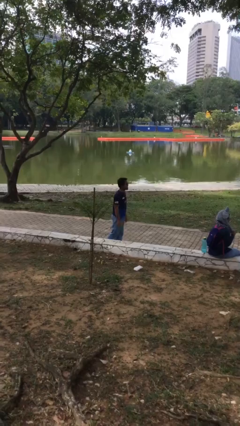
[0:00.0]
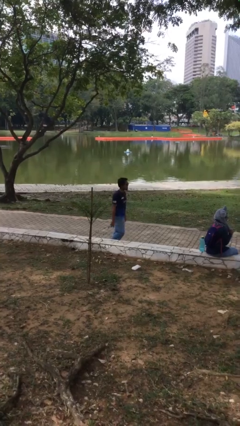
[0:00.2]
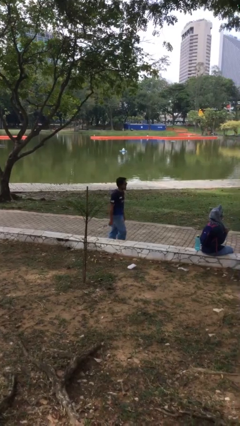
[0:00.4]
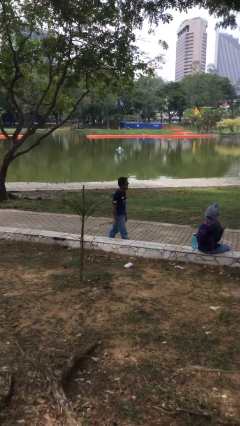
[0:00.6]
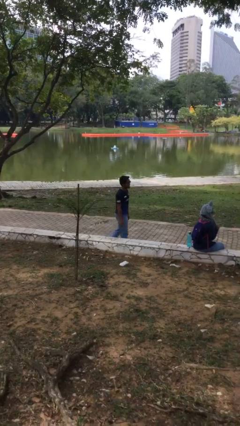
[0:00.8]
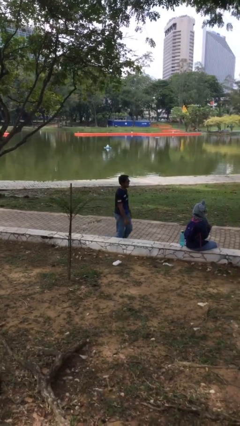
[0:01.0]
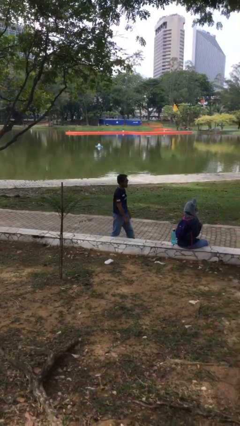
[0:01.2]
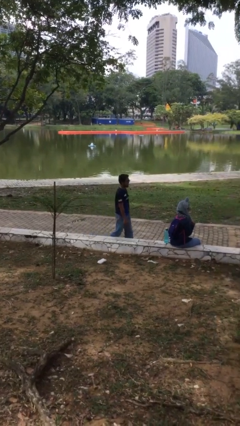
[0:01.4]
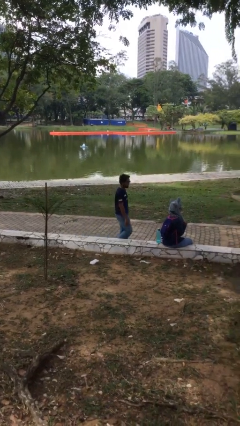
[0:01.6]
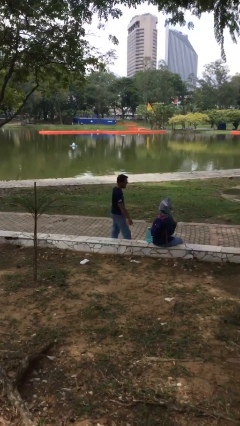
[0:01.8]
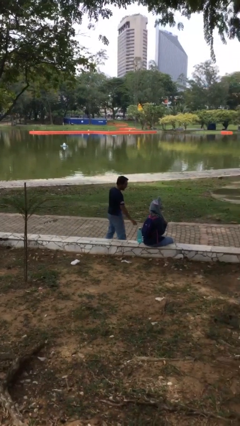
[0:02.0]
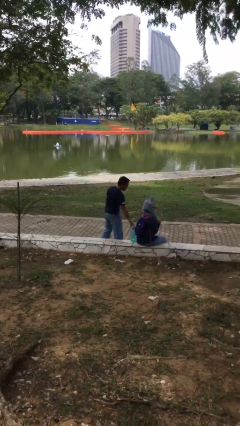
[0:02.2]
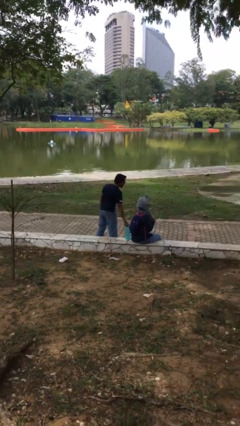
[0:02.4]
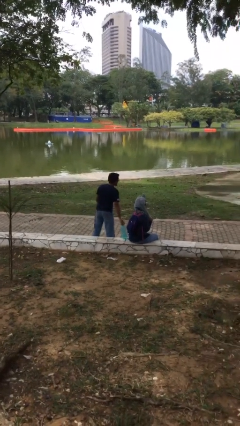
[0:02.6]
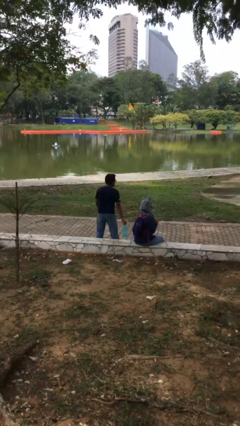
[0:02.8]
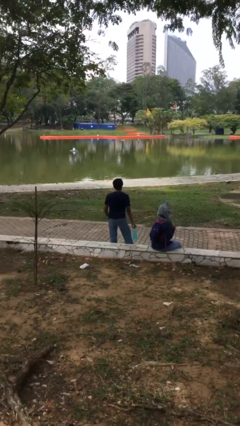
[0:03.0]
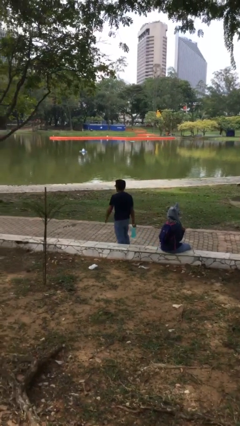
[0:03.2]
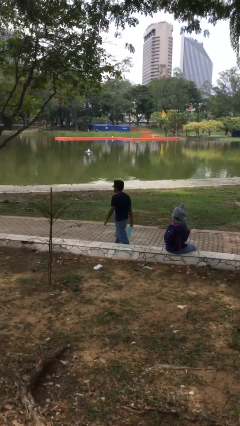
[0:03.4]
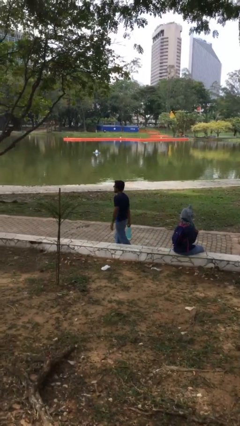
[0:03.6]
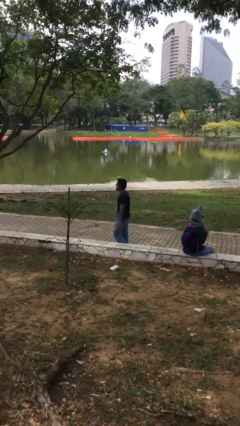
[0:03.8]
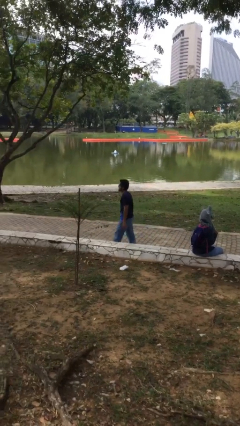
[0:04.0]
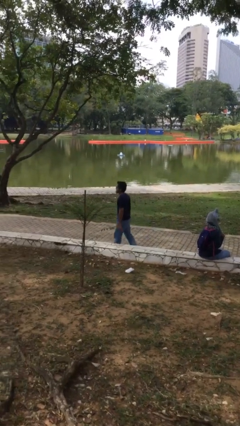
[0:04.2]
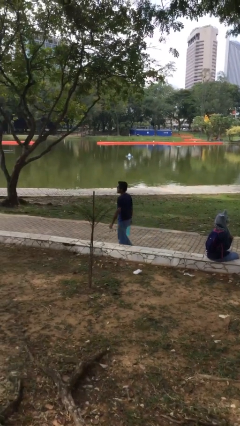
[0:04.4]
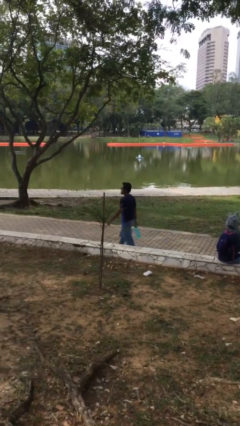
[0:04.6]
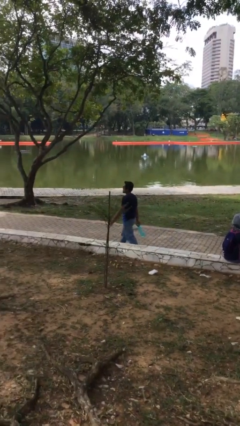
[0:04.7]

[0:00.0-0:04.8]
person steals object from person

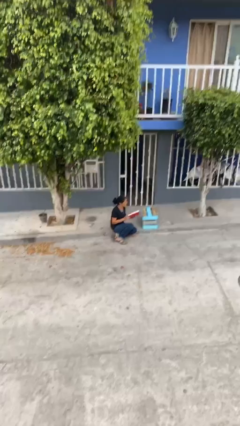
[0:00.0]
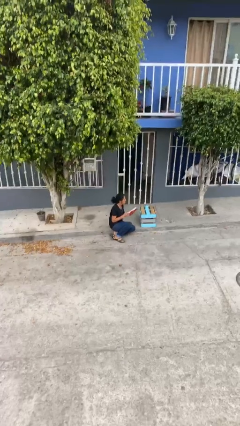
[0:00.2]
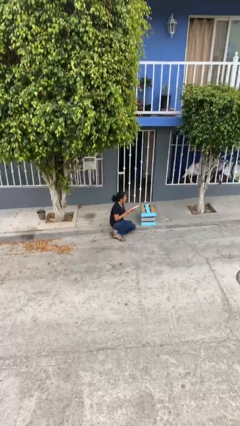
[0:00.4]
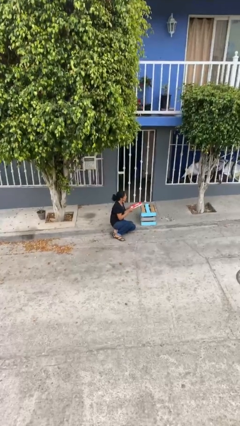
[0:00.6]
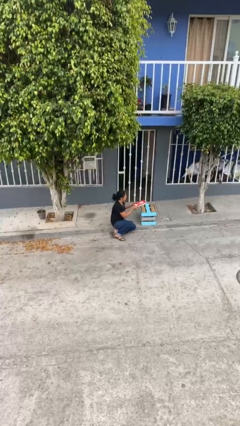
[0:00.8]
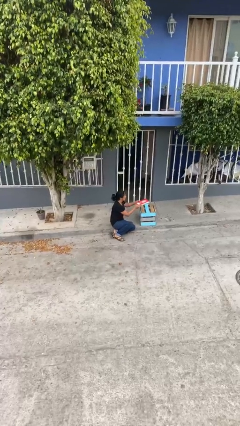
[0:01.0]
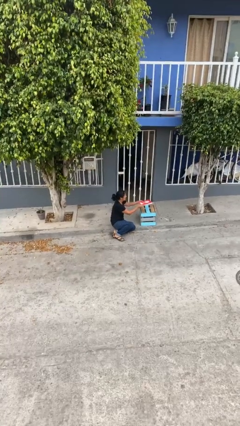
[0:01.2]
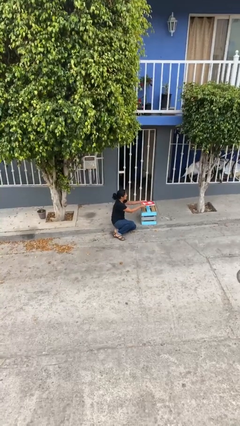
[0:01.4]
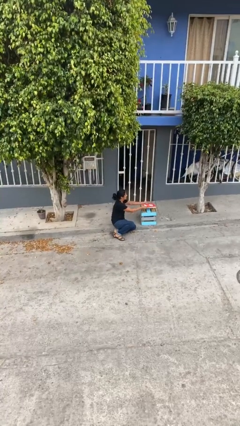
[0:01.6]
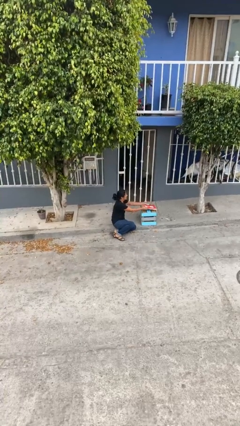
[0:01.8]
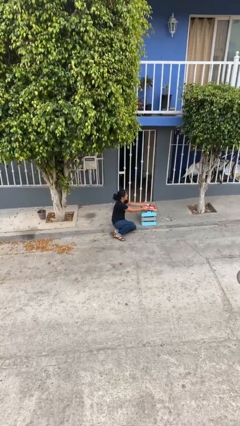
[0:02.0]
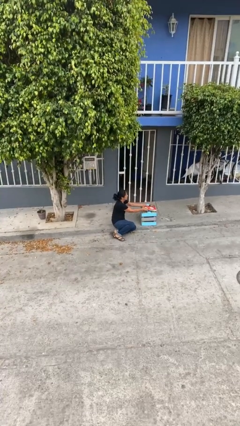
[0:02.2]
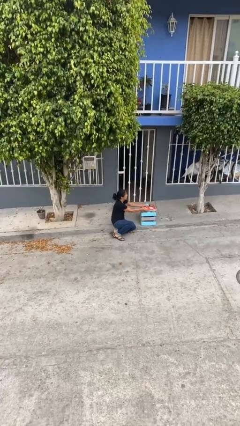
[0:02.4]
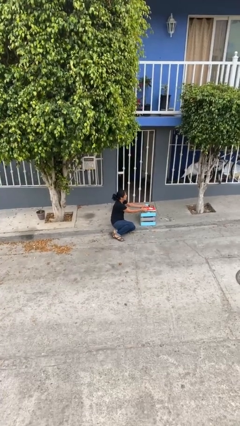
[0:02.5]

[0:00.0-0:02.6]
person puts down object on table

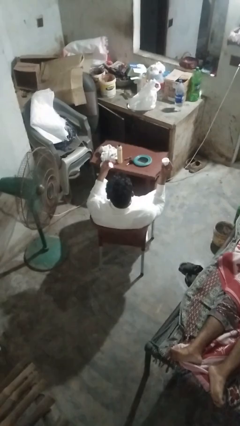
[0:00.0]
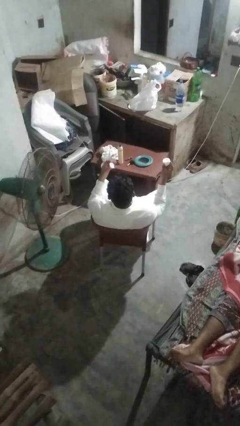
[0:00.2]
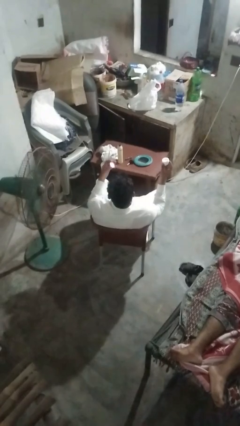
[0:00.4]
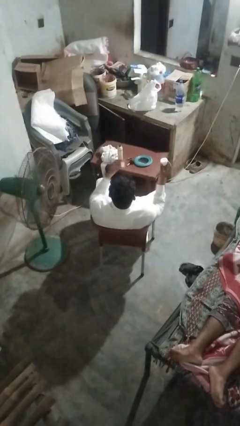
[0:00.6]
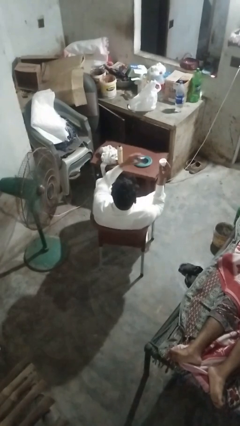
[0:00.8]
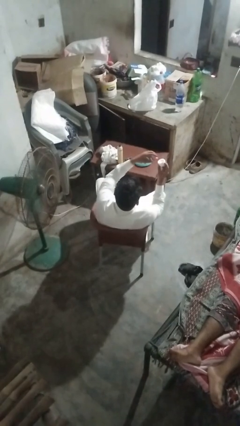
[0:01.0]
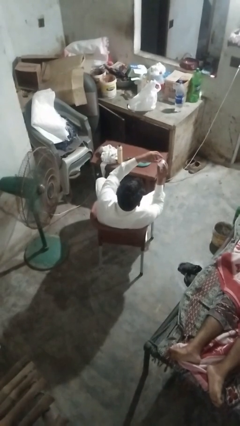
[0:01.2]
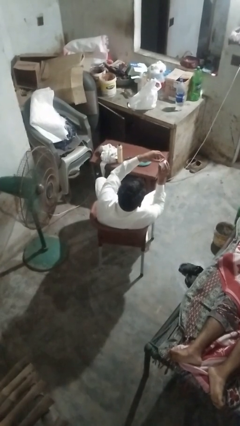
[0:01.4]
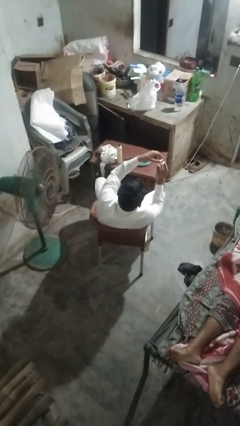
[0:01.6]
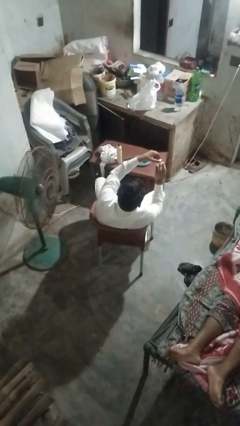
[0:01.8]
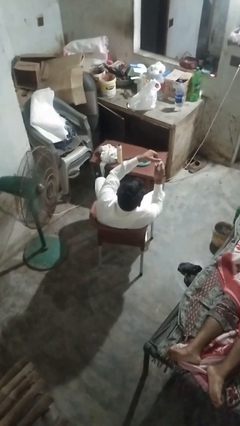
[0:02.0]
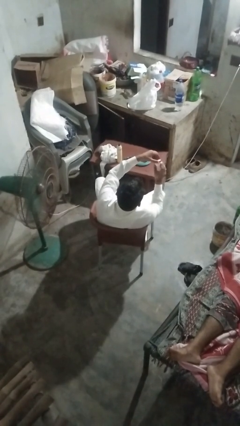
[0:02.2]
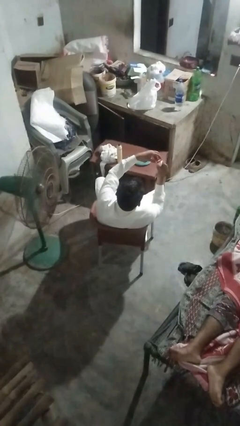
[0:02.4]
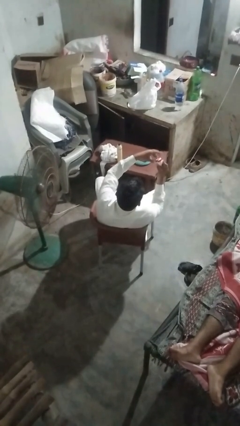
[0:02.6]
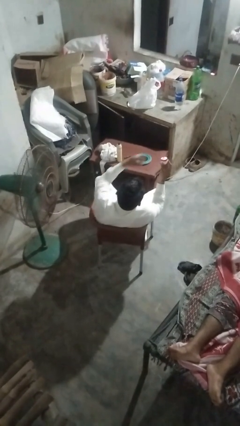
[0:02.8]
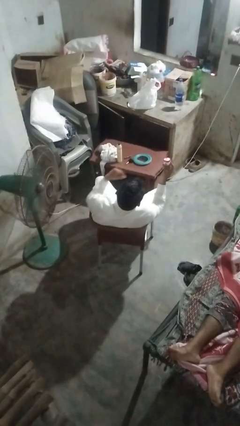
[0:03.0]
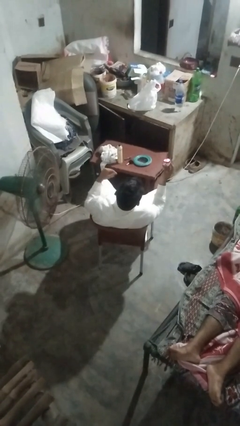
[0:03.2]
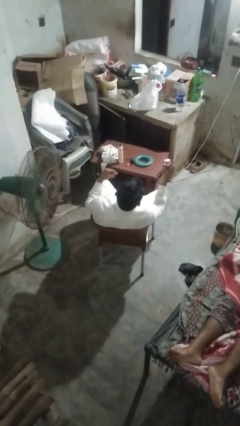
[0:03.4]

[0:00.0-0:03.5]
person closes jar

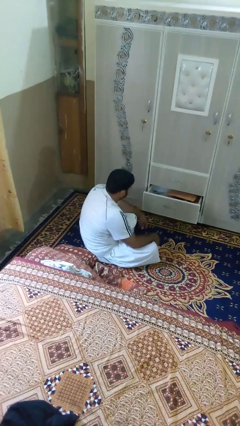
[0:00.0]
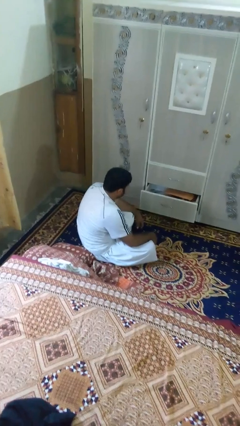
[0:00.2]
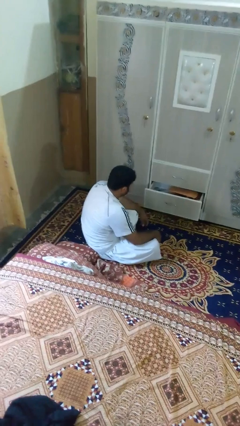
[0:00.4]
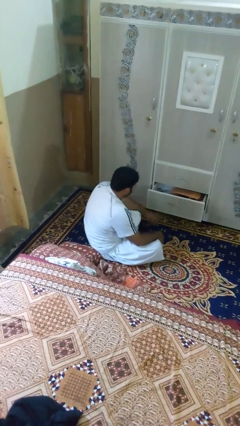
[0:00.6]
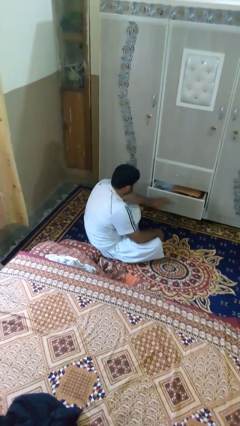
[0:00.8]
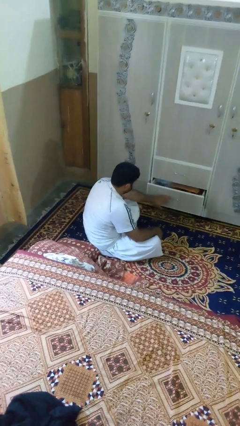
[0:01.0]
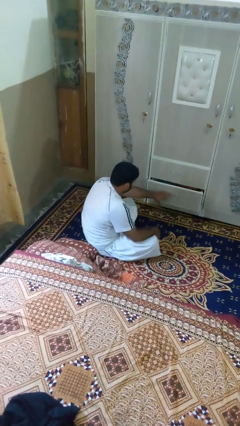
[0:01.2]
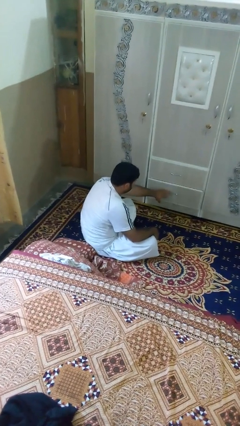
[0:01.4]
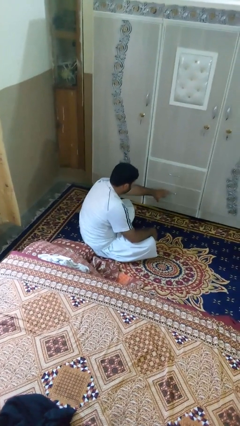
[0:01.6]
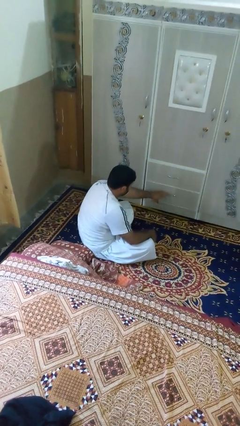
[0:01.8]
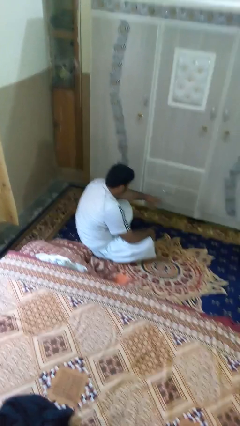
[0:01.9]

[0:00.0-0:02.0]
person closes dresser drawer

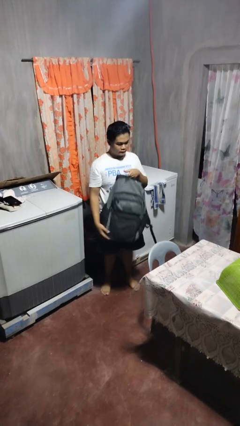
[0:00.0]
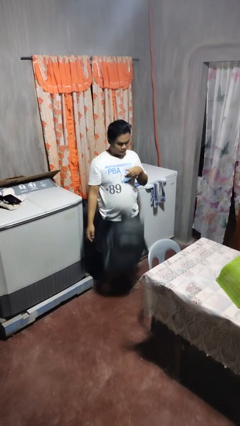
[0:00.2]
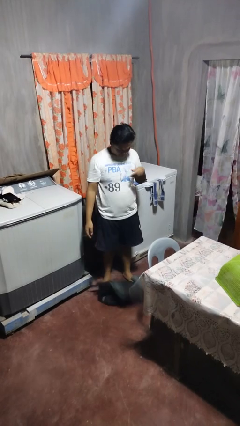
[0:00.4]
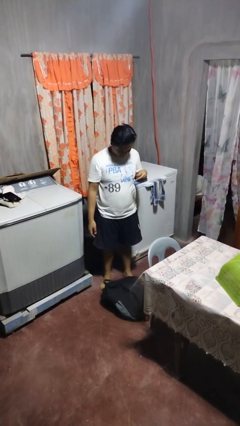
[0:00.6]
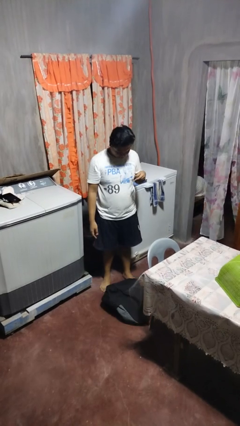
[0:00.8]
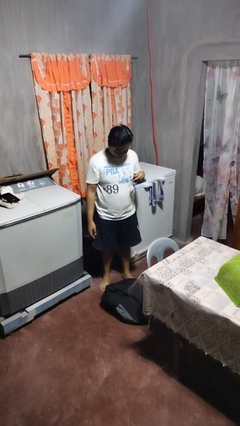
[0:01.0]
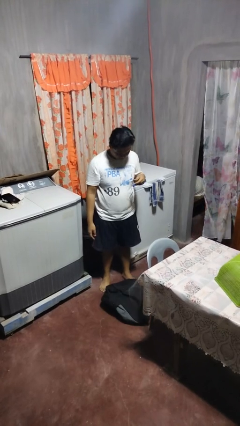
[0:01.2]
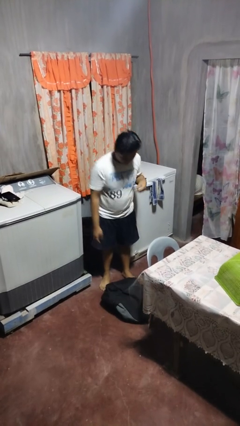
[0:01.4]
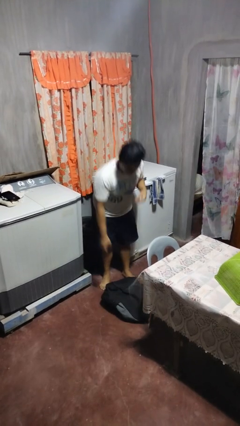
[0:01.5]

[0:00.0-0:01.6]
person drops object

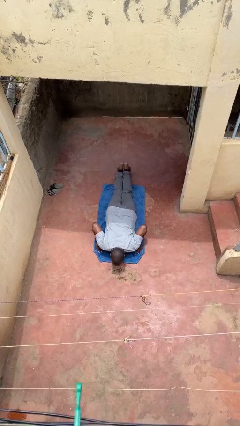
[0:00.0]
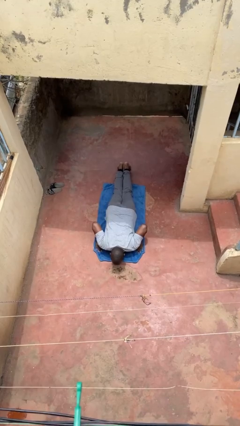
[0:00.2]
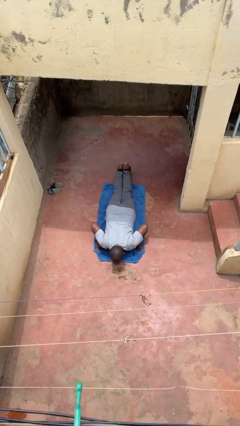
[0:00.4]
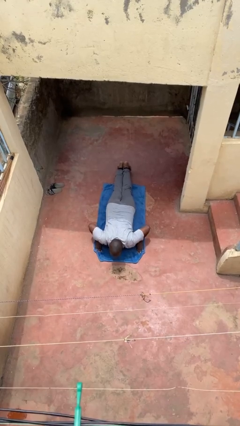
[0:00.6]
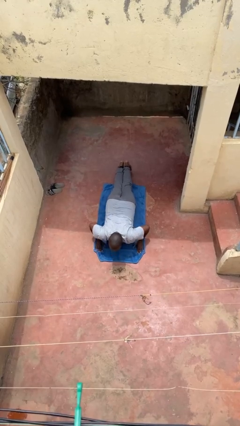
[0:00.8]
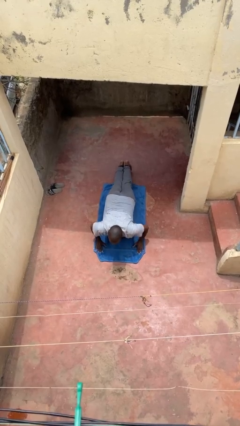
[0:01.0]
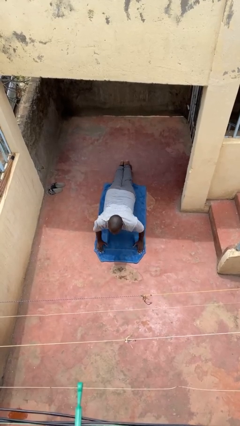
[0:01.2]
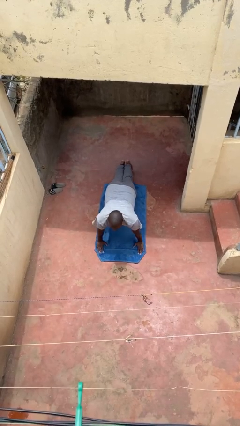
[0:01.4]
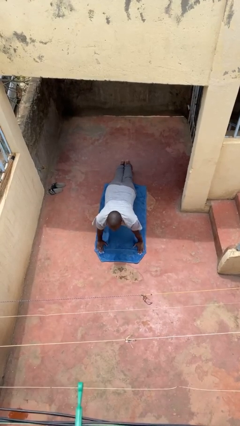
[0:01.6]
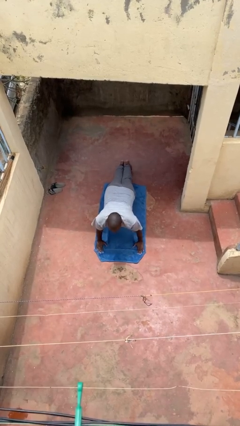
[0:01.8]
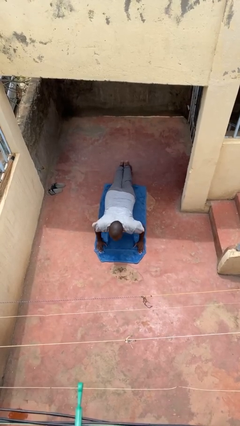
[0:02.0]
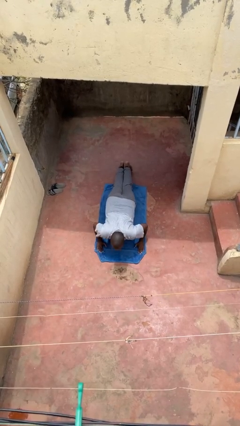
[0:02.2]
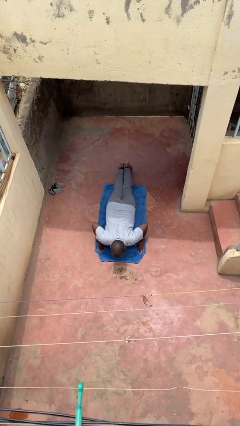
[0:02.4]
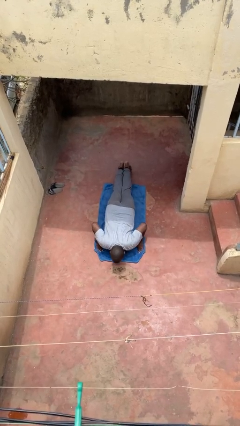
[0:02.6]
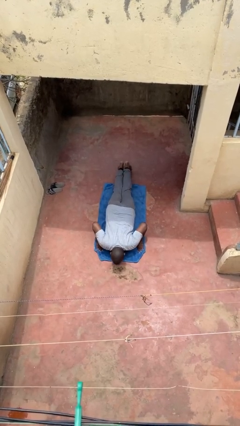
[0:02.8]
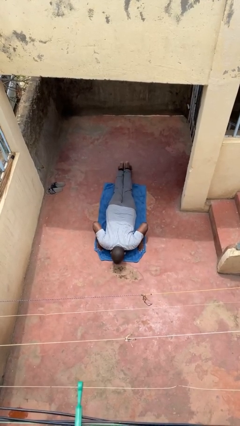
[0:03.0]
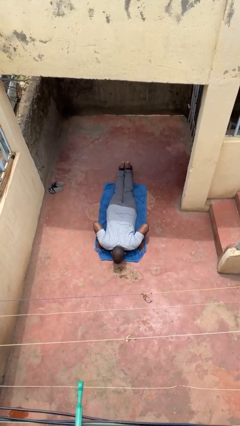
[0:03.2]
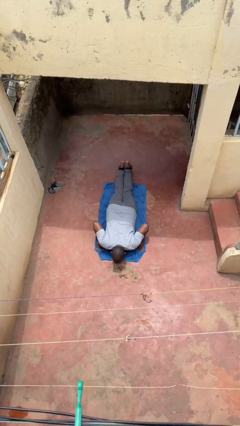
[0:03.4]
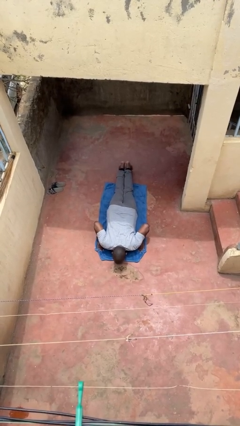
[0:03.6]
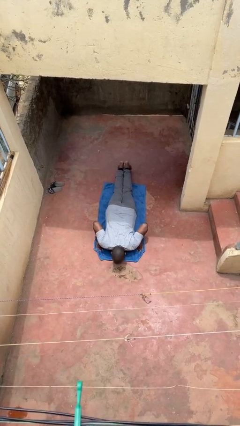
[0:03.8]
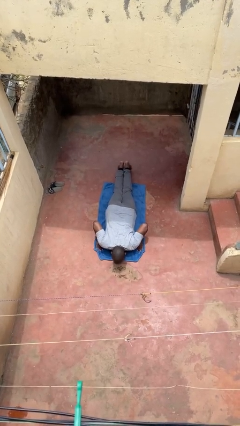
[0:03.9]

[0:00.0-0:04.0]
person exercises with pushup
